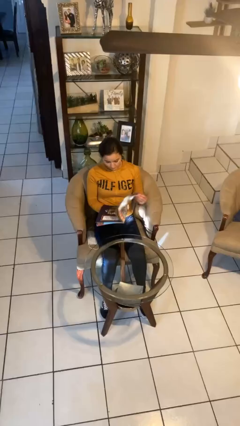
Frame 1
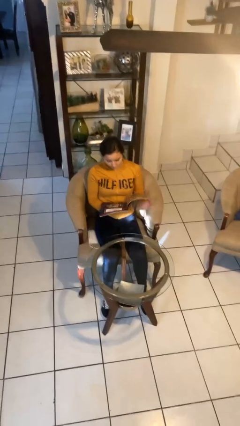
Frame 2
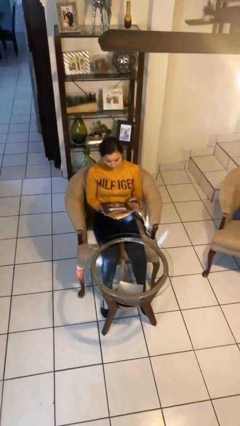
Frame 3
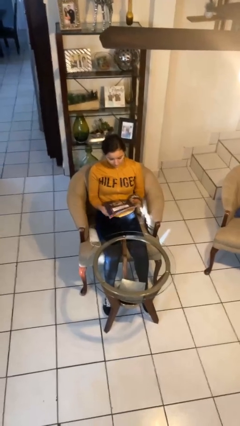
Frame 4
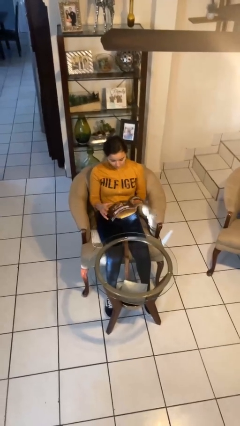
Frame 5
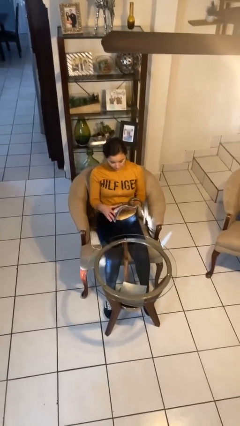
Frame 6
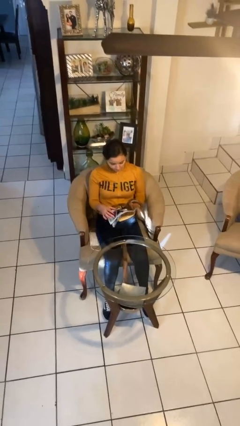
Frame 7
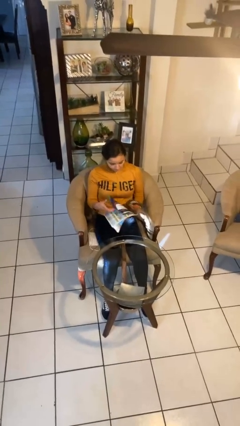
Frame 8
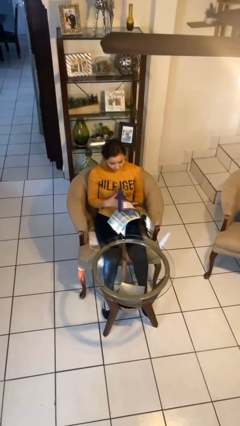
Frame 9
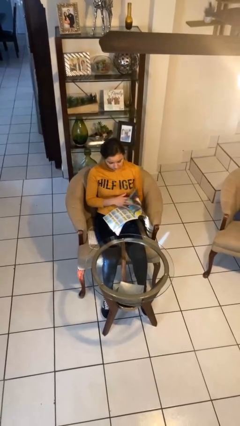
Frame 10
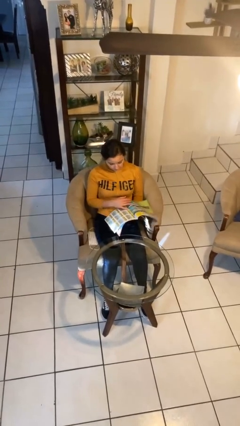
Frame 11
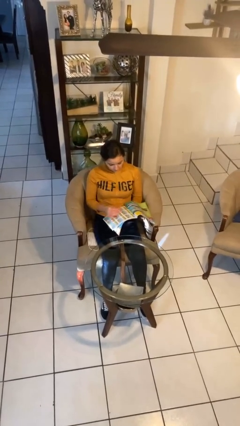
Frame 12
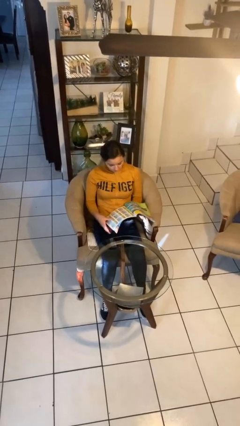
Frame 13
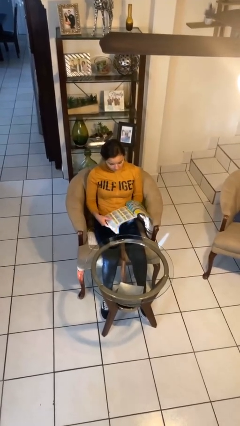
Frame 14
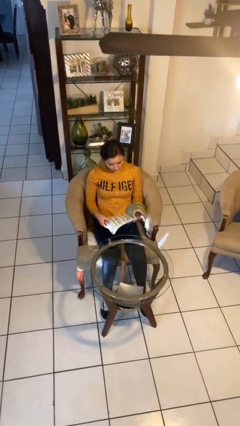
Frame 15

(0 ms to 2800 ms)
person reads magazine

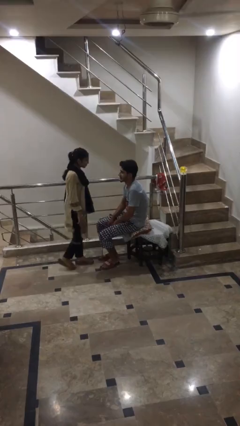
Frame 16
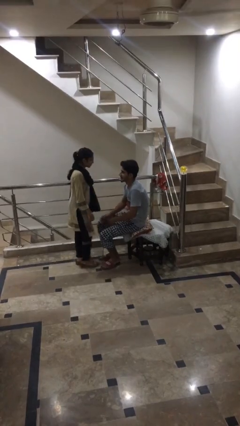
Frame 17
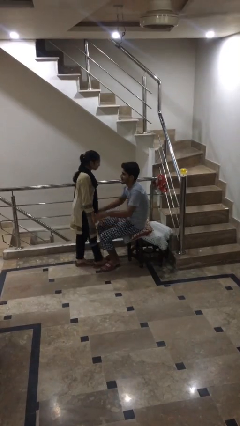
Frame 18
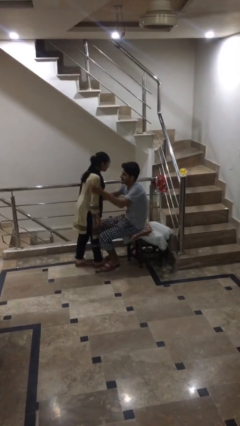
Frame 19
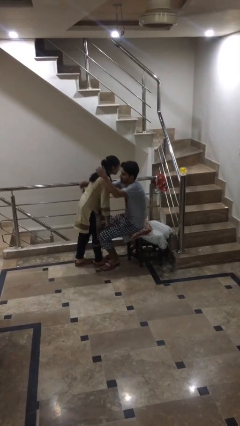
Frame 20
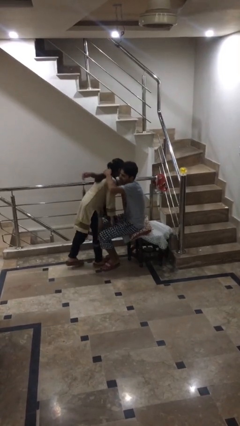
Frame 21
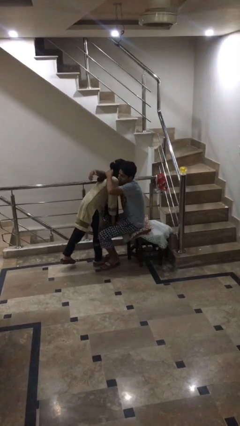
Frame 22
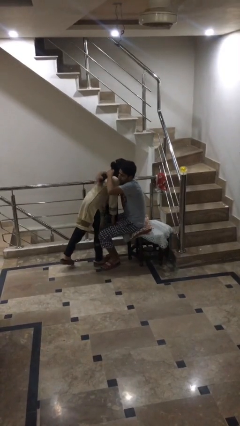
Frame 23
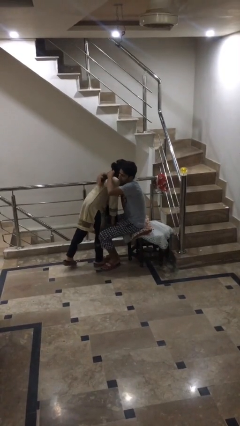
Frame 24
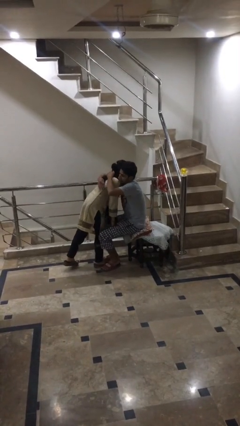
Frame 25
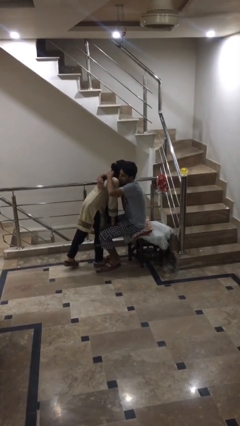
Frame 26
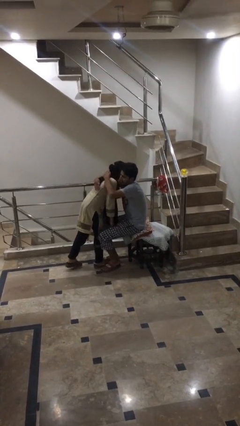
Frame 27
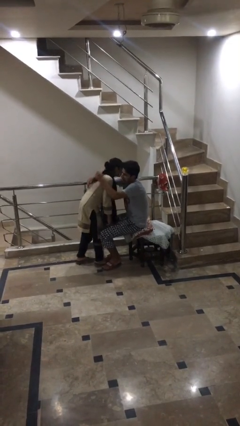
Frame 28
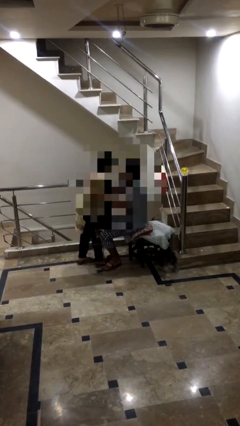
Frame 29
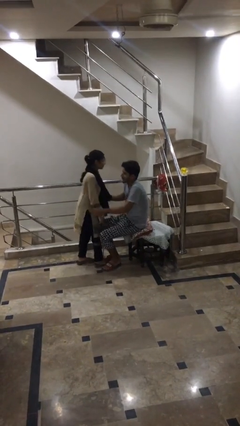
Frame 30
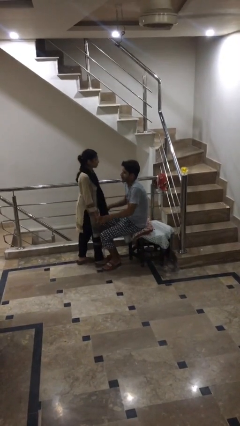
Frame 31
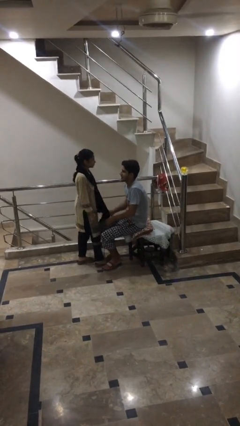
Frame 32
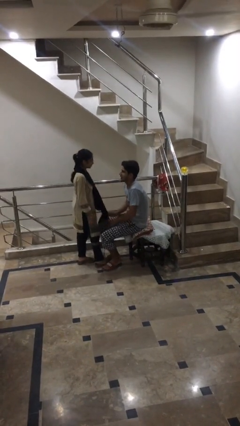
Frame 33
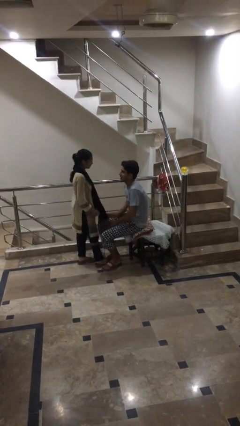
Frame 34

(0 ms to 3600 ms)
person embraces person

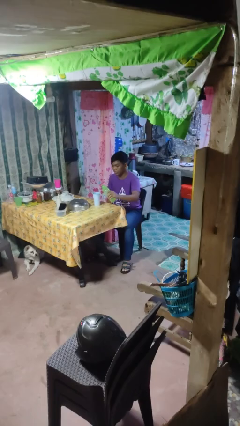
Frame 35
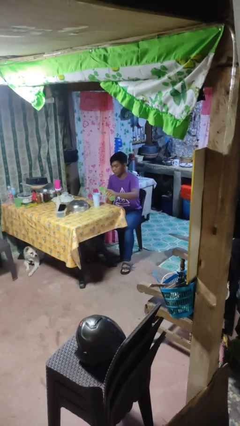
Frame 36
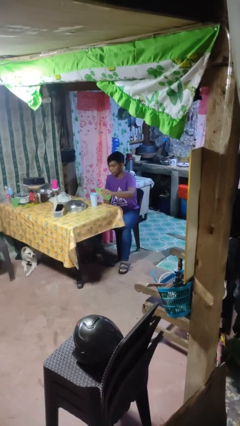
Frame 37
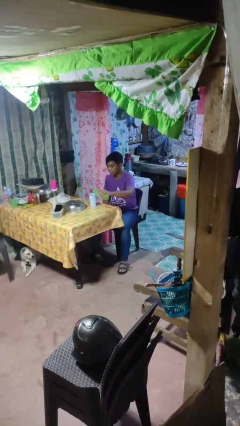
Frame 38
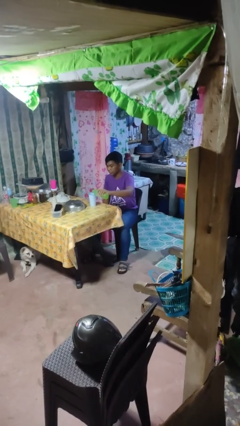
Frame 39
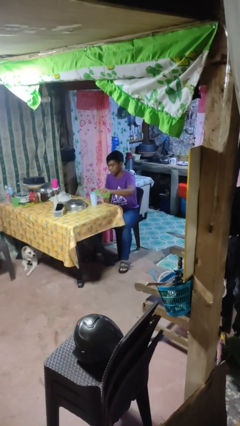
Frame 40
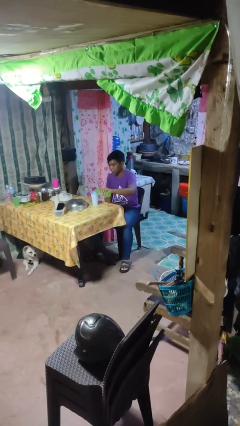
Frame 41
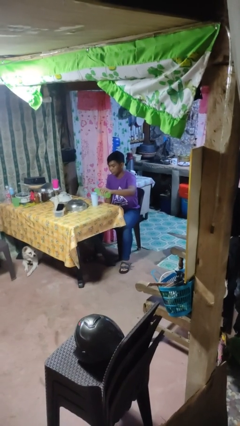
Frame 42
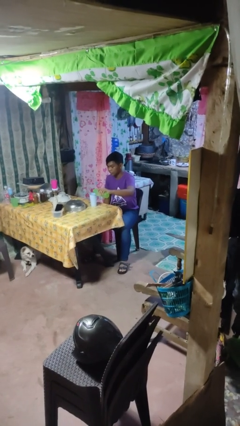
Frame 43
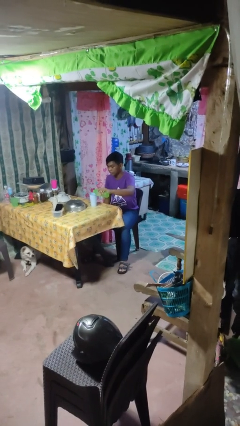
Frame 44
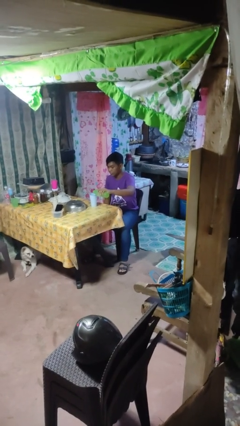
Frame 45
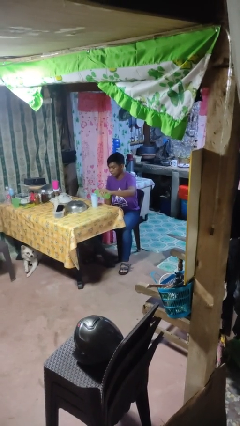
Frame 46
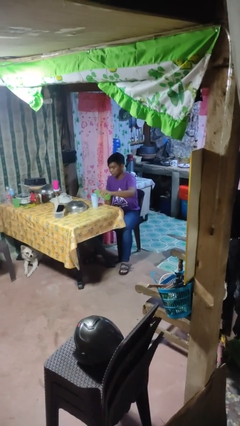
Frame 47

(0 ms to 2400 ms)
person pours liquid into cup

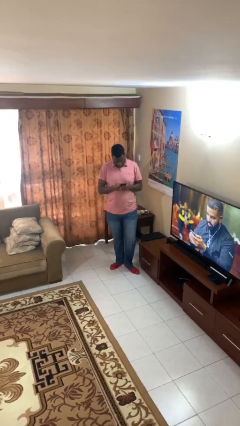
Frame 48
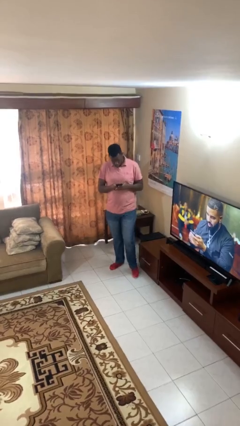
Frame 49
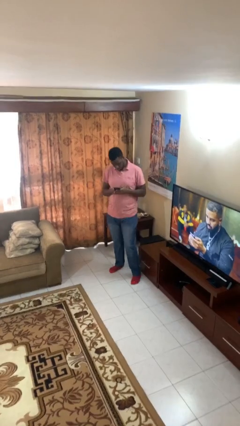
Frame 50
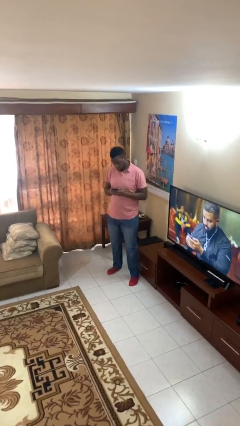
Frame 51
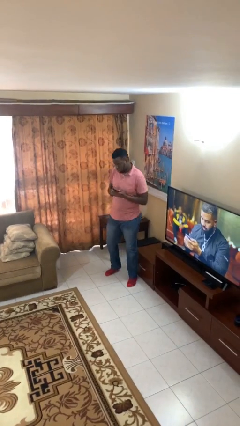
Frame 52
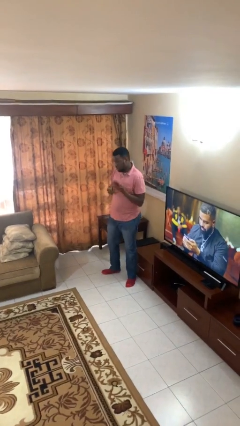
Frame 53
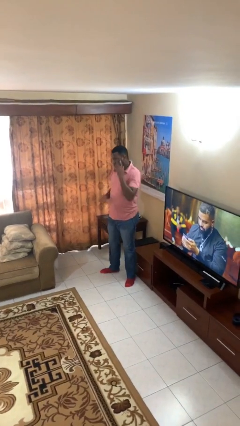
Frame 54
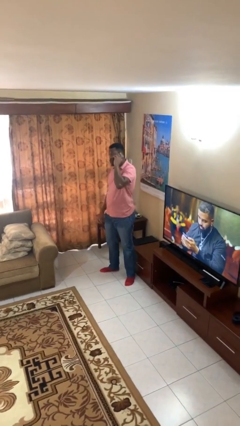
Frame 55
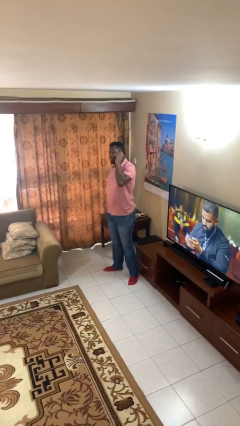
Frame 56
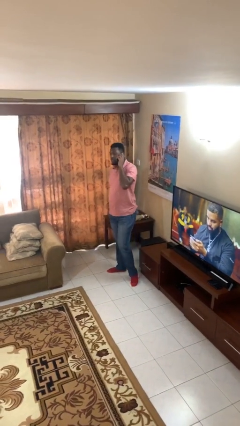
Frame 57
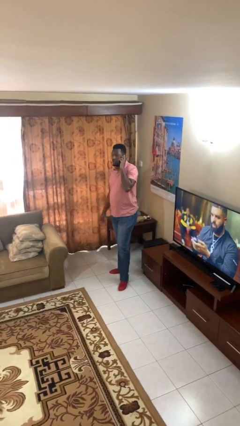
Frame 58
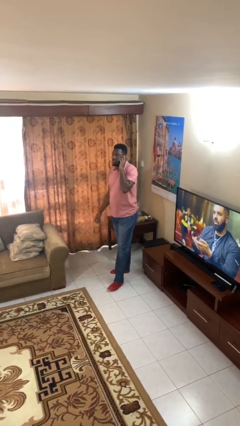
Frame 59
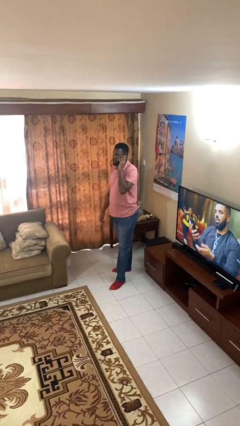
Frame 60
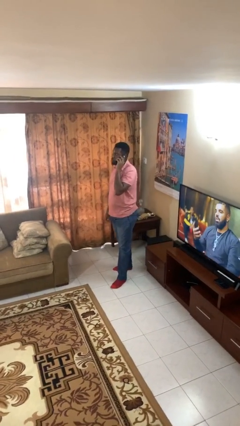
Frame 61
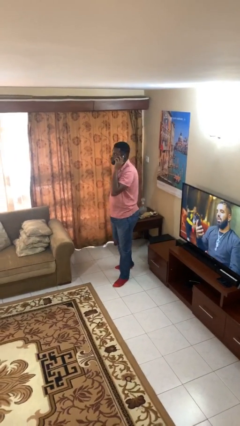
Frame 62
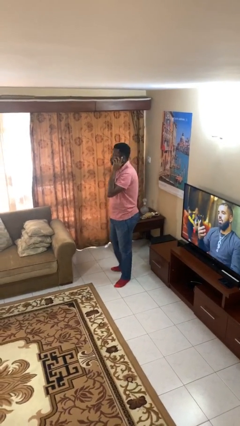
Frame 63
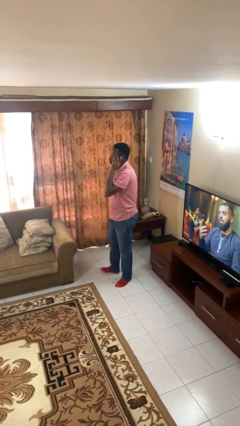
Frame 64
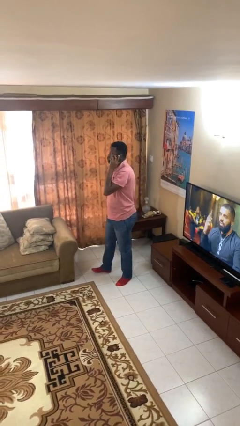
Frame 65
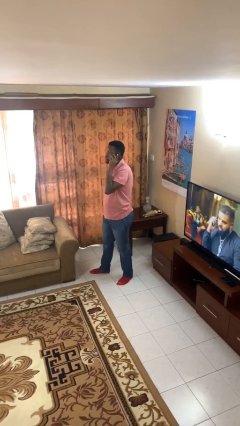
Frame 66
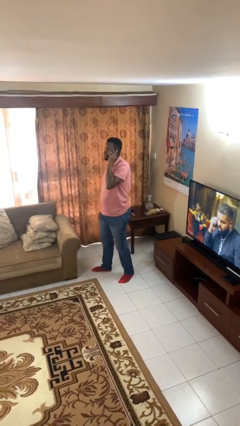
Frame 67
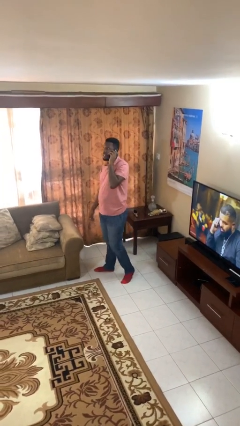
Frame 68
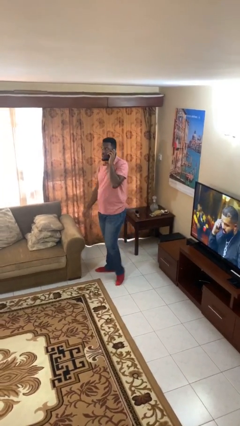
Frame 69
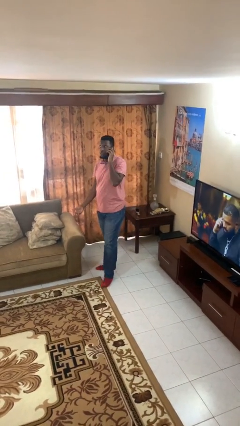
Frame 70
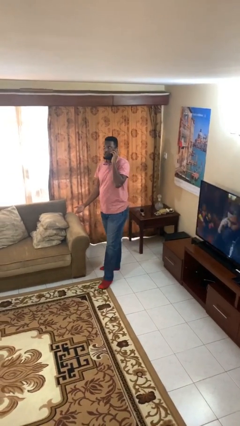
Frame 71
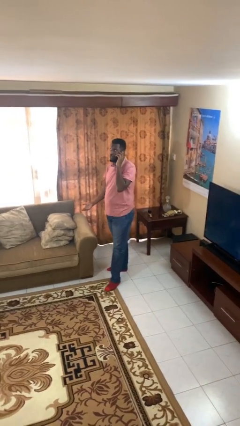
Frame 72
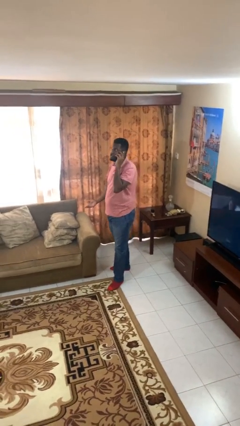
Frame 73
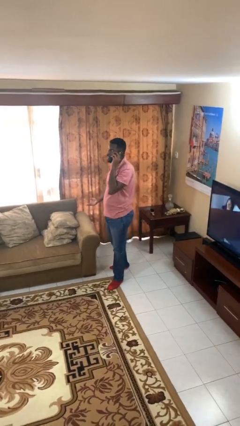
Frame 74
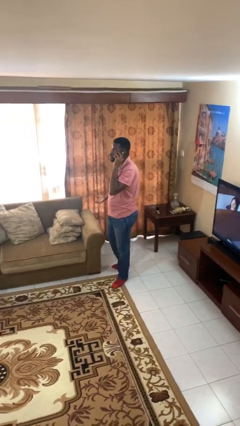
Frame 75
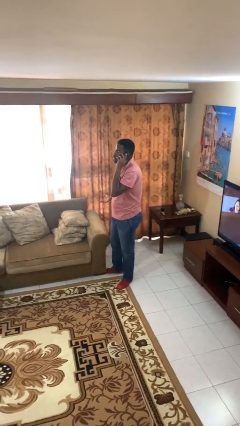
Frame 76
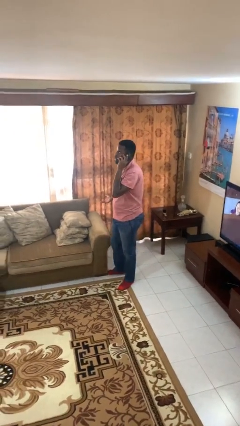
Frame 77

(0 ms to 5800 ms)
person talks on phone

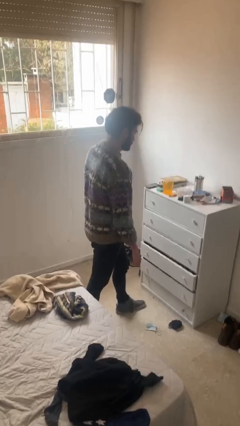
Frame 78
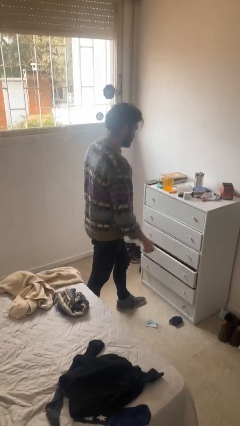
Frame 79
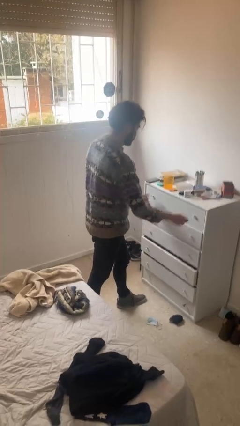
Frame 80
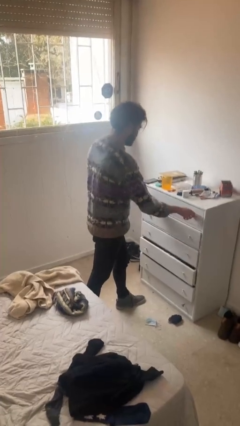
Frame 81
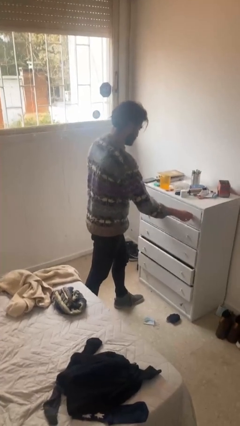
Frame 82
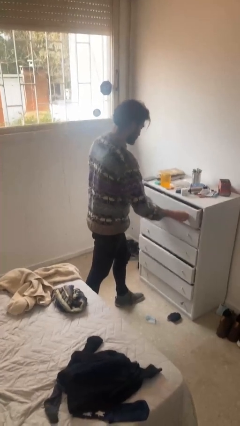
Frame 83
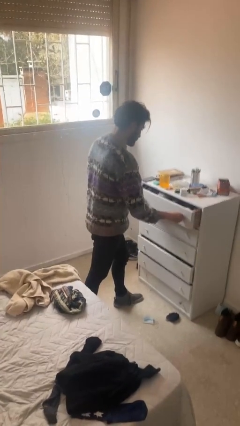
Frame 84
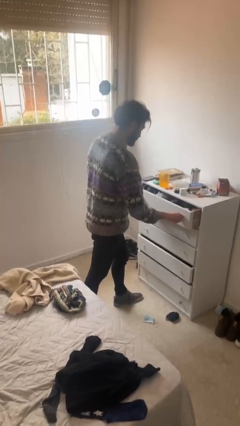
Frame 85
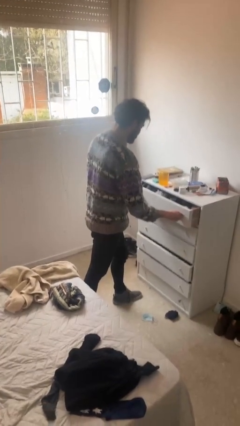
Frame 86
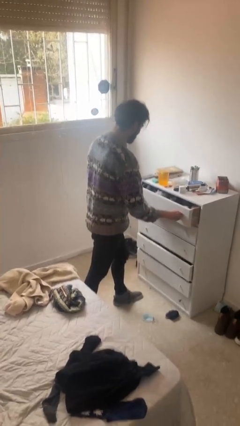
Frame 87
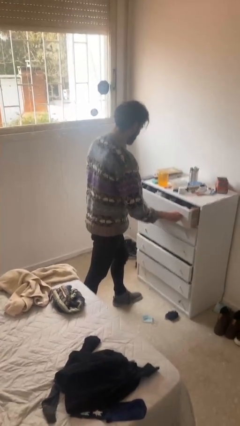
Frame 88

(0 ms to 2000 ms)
person opens dresser drawer

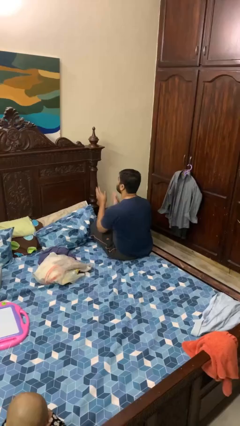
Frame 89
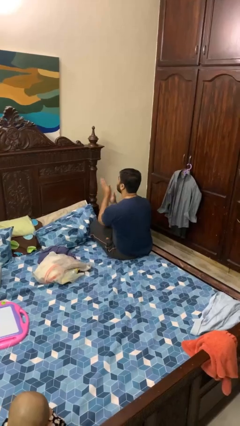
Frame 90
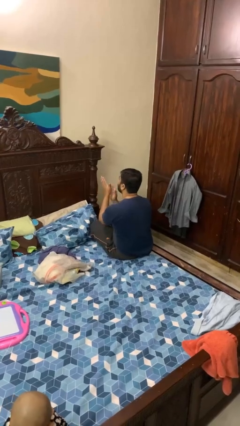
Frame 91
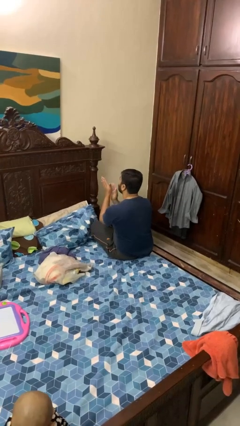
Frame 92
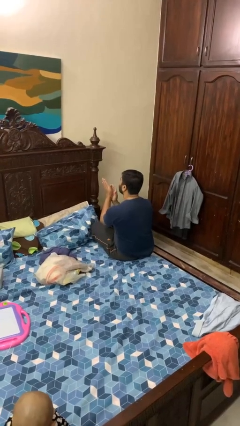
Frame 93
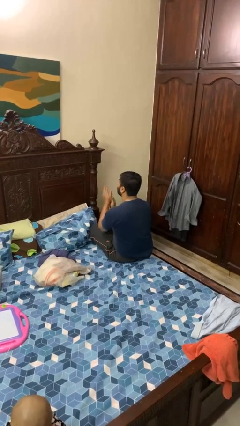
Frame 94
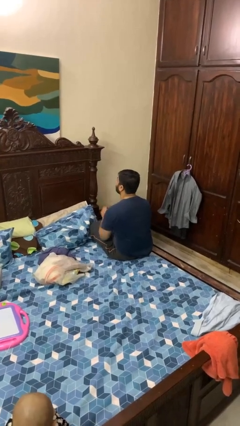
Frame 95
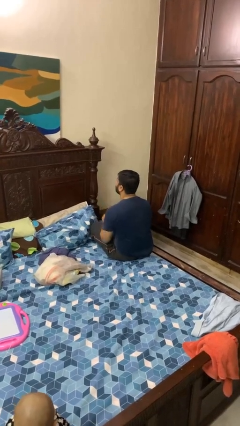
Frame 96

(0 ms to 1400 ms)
person claps hands
